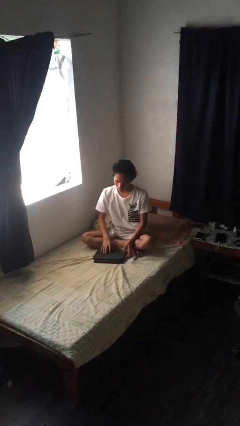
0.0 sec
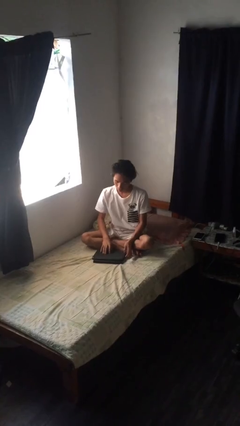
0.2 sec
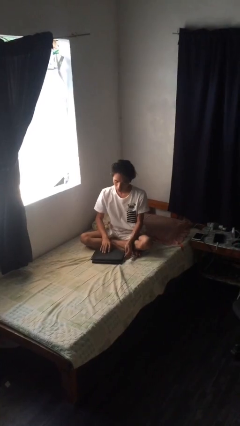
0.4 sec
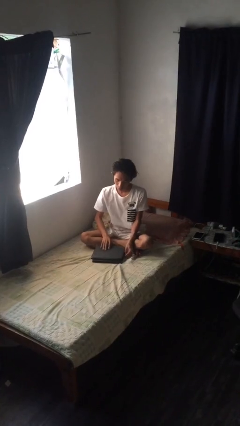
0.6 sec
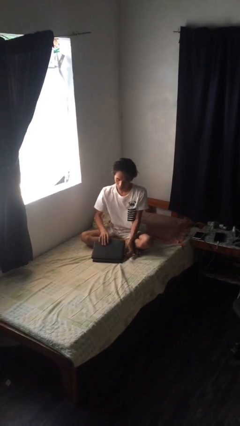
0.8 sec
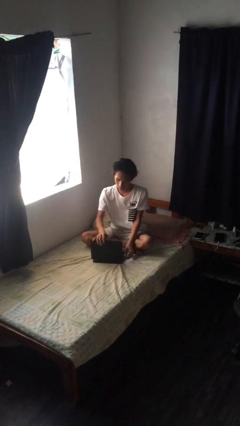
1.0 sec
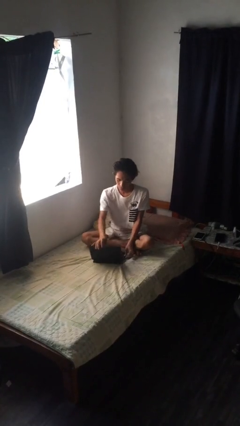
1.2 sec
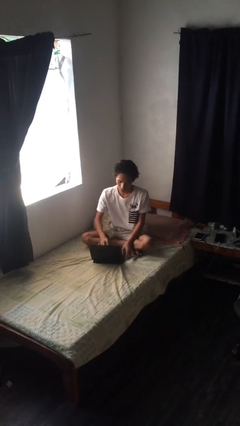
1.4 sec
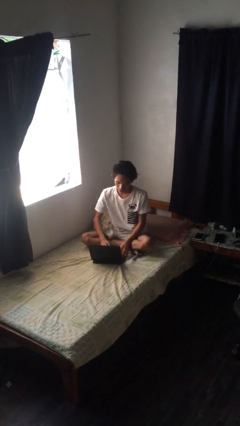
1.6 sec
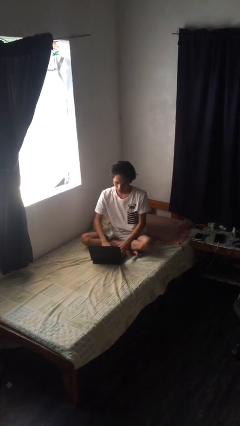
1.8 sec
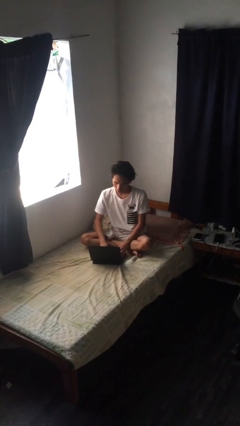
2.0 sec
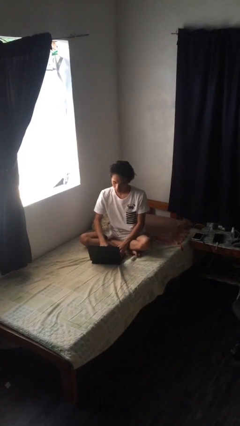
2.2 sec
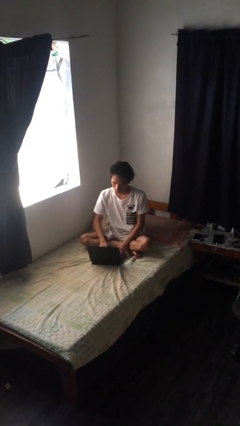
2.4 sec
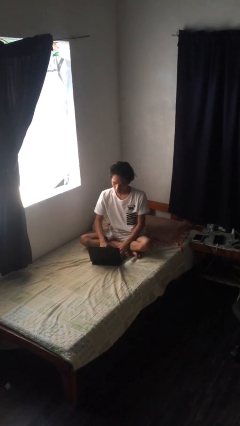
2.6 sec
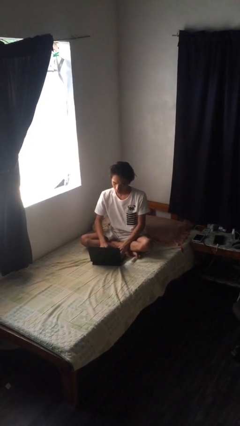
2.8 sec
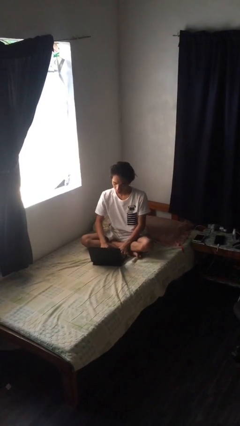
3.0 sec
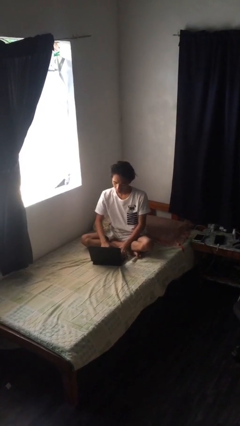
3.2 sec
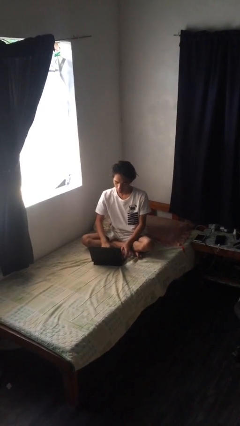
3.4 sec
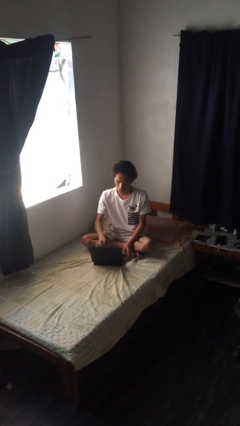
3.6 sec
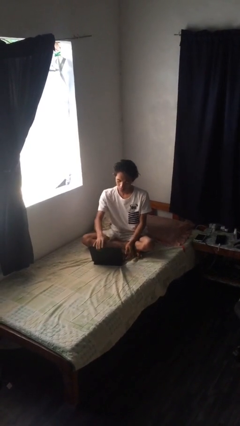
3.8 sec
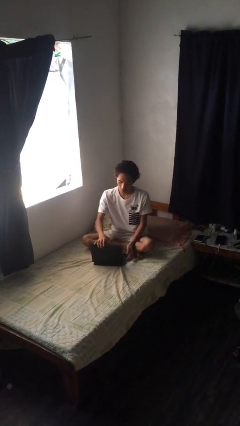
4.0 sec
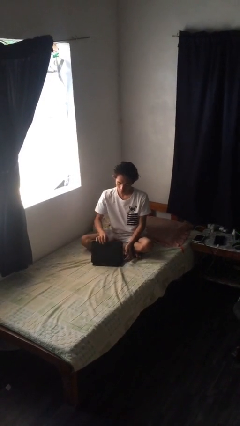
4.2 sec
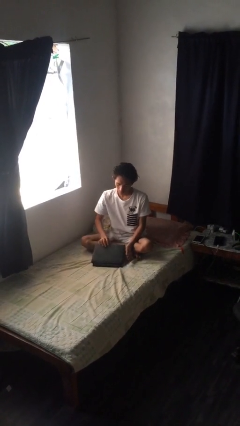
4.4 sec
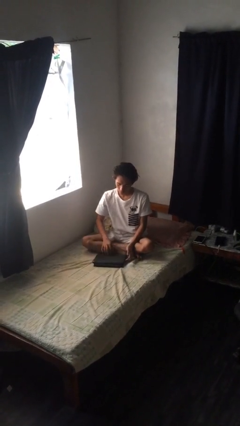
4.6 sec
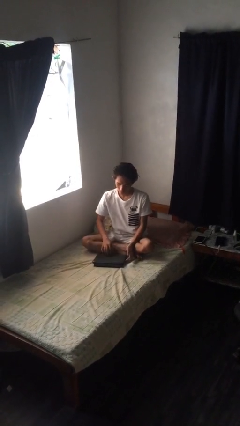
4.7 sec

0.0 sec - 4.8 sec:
person interacts with laptop

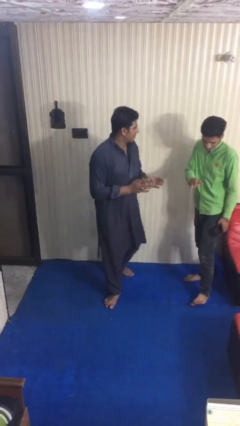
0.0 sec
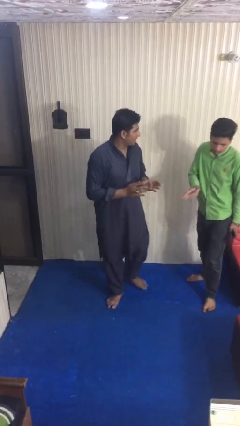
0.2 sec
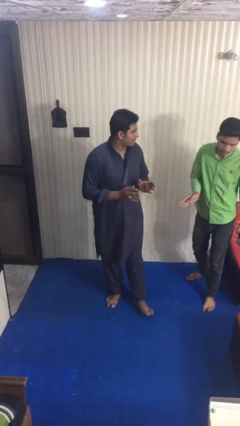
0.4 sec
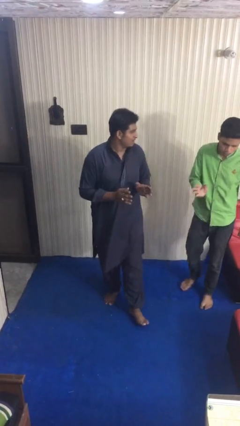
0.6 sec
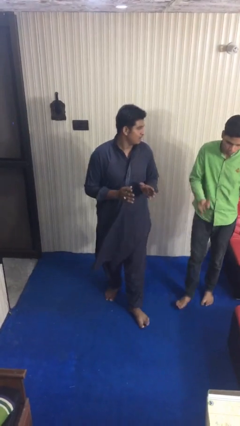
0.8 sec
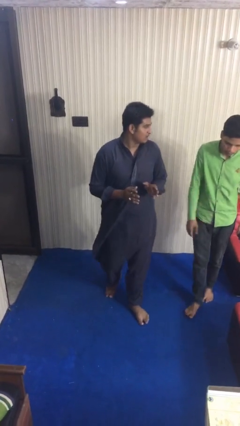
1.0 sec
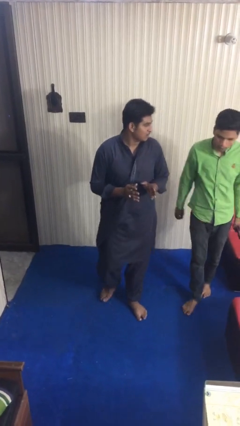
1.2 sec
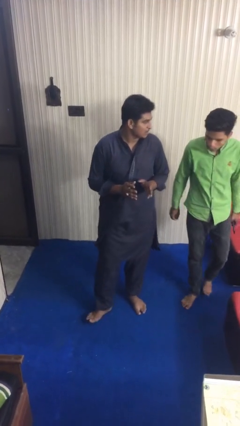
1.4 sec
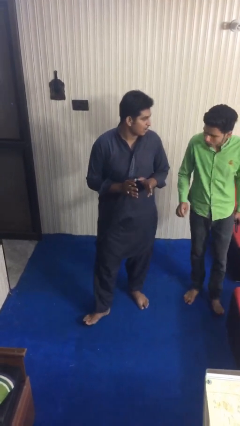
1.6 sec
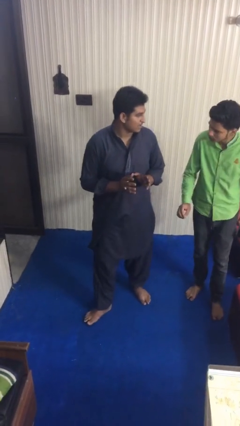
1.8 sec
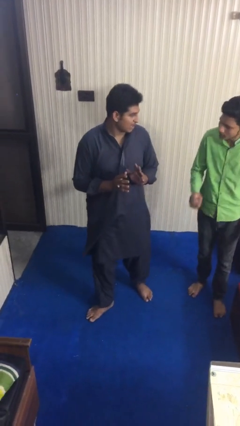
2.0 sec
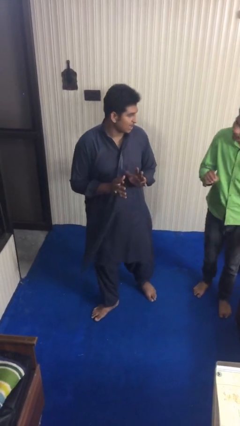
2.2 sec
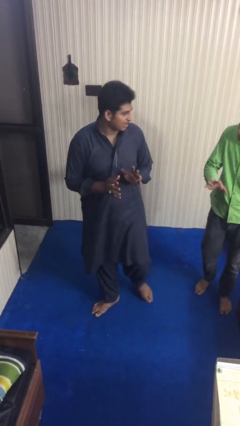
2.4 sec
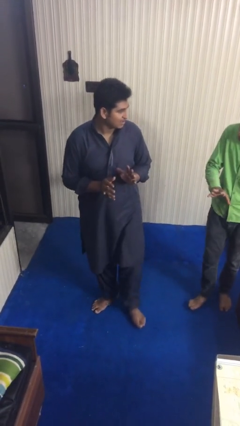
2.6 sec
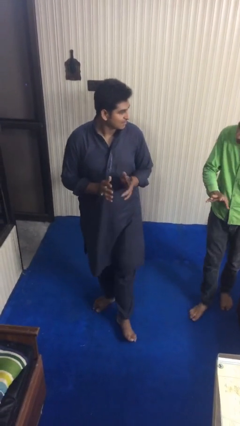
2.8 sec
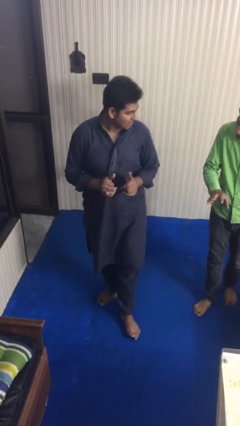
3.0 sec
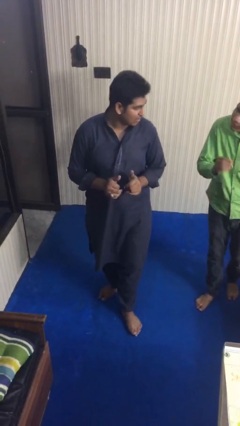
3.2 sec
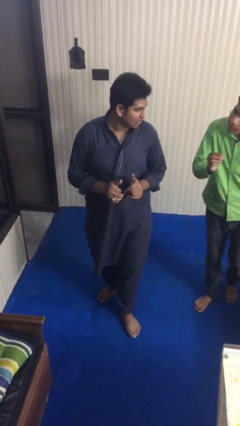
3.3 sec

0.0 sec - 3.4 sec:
person talks to person

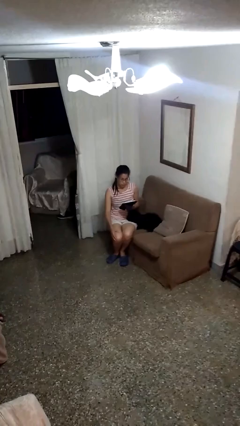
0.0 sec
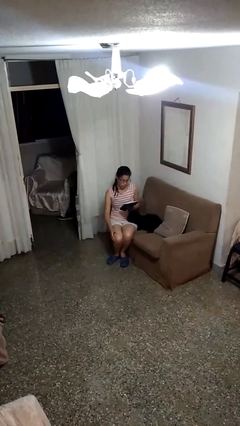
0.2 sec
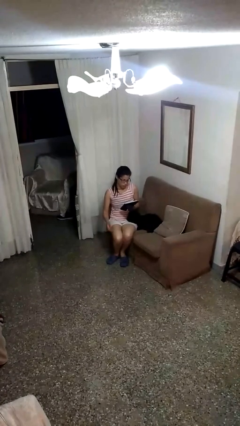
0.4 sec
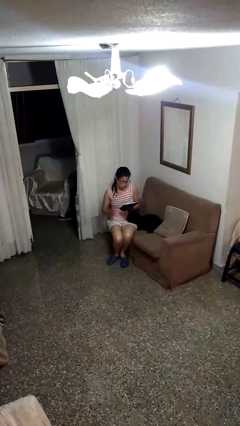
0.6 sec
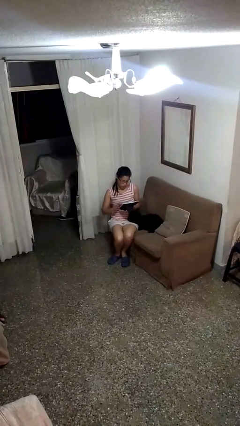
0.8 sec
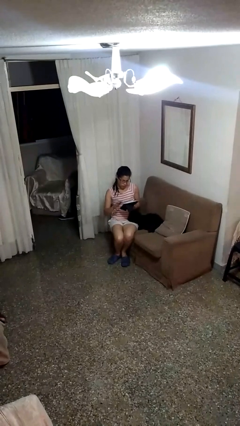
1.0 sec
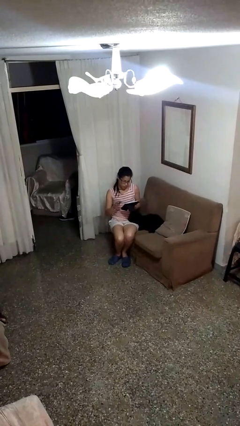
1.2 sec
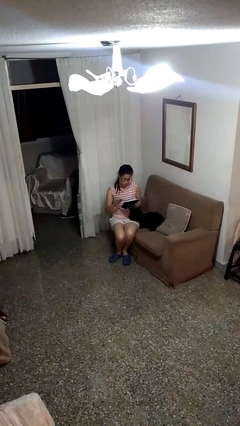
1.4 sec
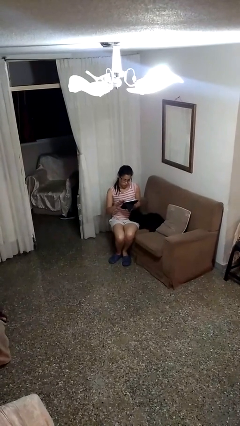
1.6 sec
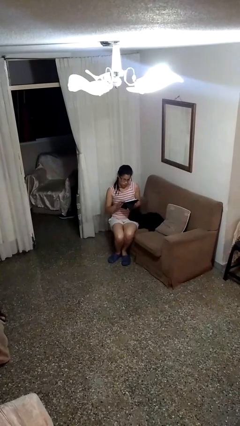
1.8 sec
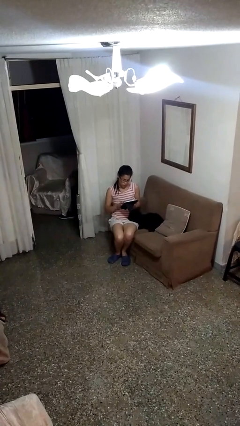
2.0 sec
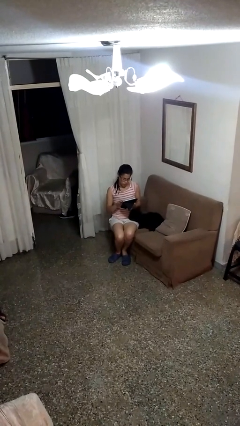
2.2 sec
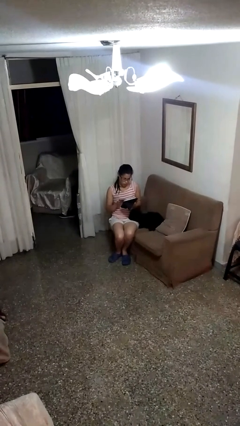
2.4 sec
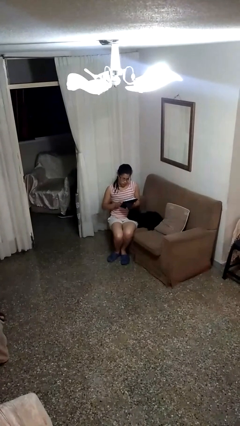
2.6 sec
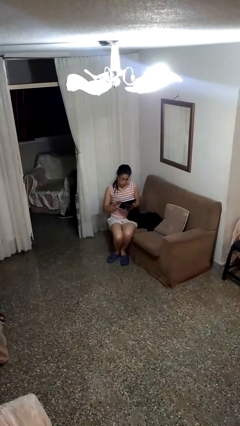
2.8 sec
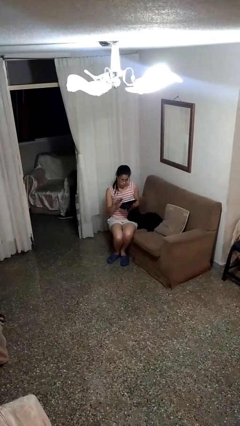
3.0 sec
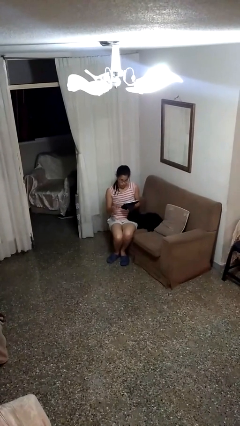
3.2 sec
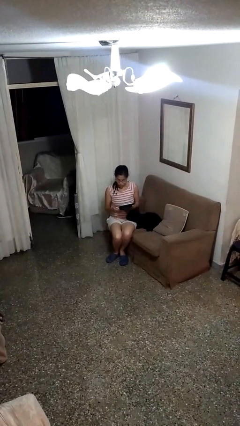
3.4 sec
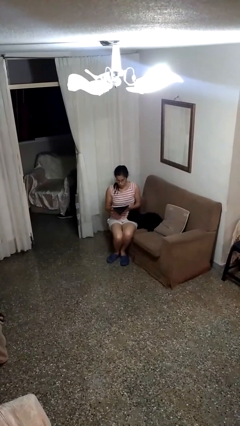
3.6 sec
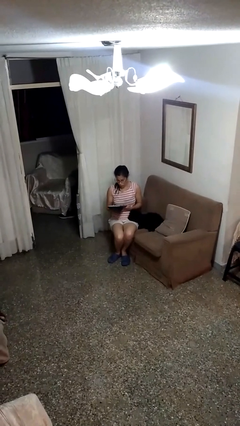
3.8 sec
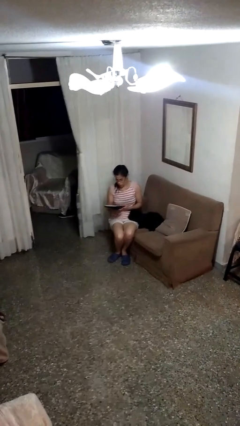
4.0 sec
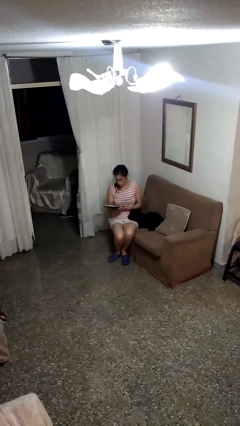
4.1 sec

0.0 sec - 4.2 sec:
person interacts with tablet

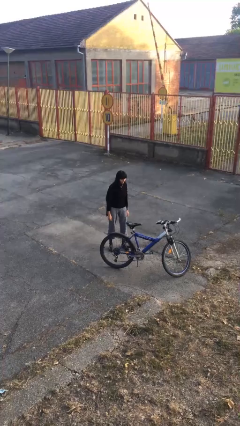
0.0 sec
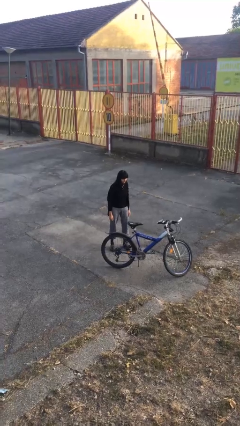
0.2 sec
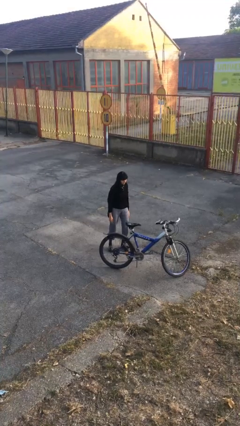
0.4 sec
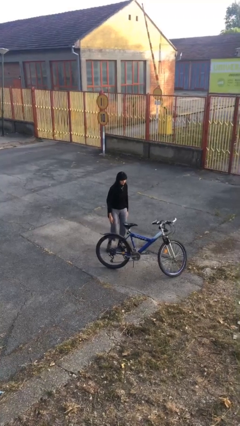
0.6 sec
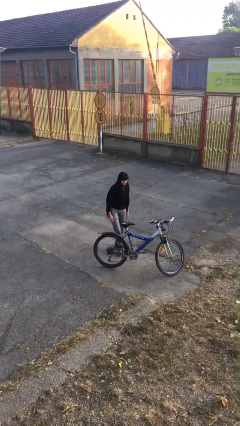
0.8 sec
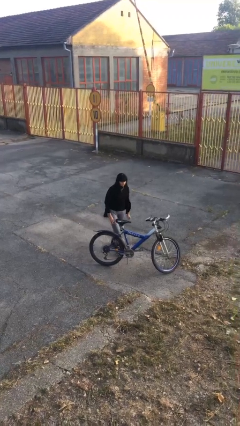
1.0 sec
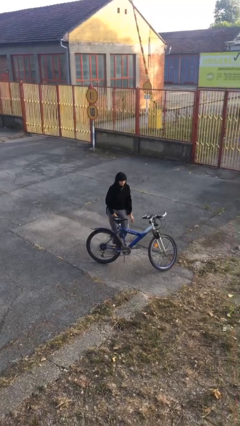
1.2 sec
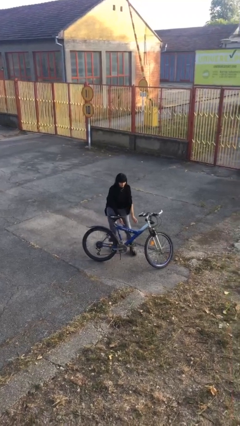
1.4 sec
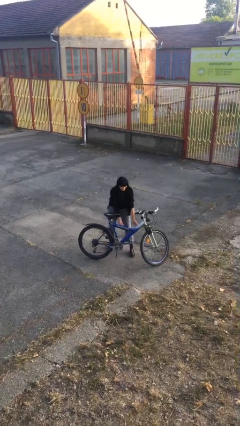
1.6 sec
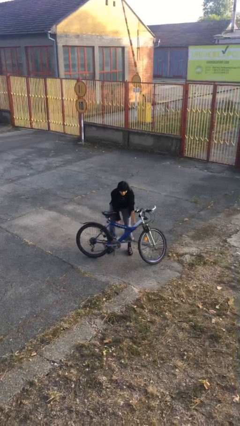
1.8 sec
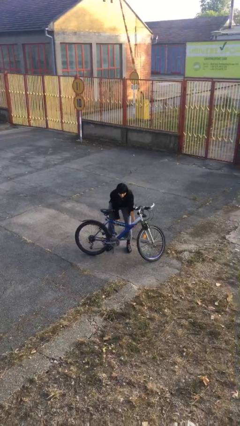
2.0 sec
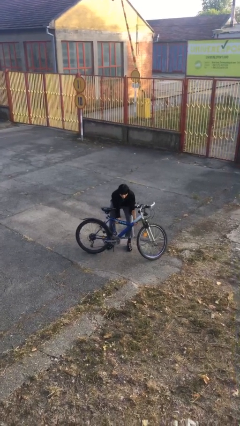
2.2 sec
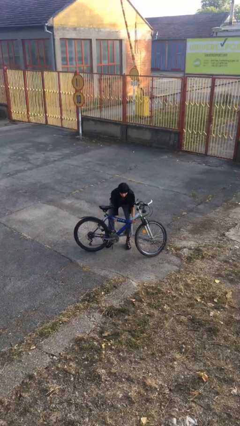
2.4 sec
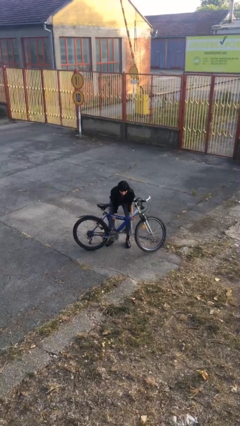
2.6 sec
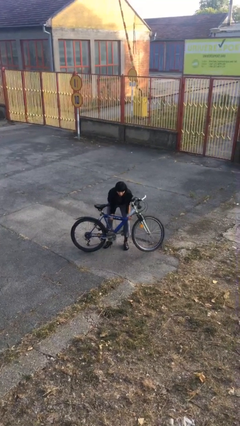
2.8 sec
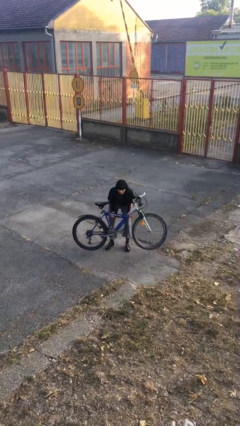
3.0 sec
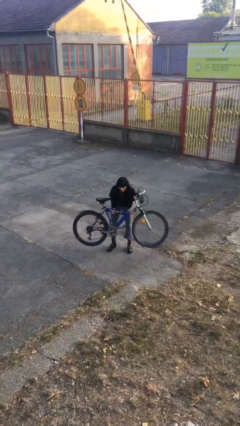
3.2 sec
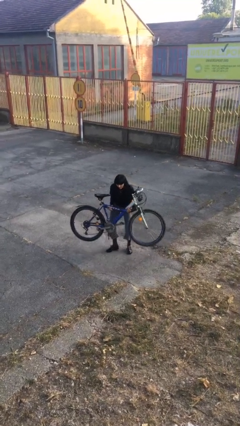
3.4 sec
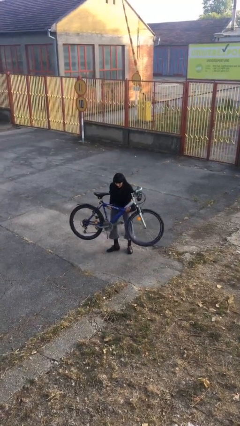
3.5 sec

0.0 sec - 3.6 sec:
person picks up object from floor

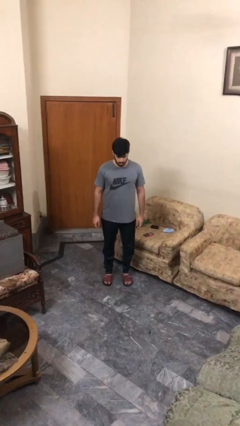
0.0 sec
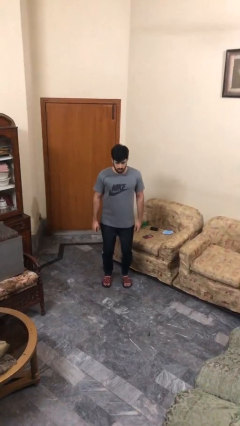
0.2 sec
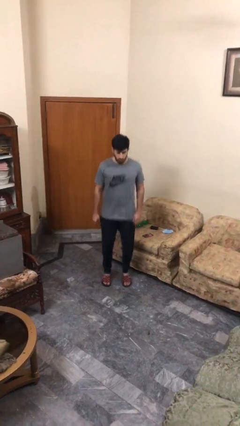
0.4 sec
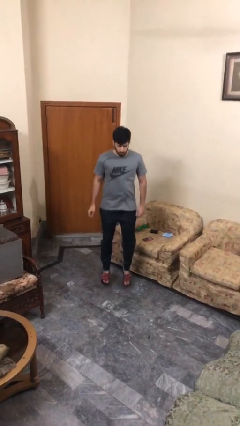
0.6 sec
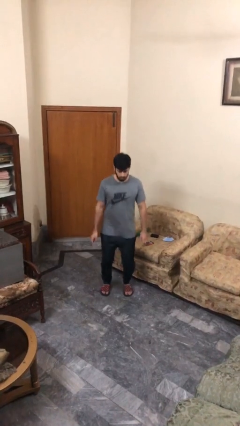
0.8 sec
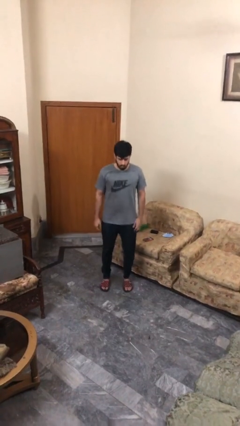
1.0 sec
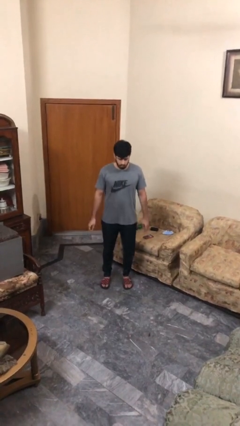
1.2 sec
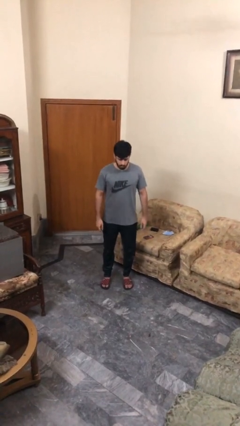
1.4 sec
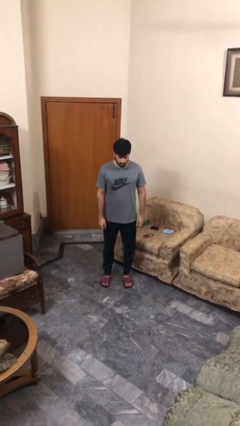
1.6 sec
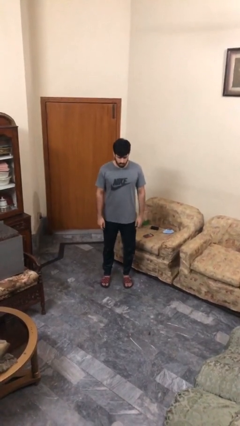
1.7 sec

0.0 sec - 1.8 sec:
person jumps
